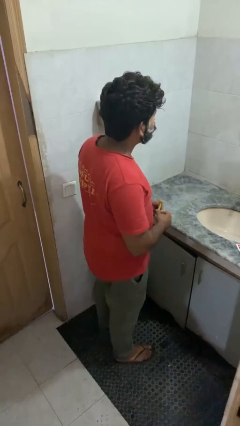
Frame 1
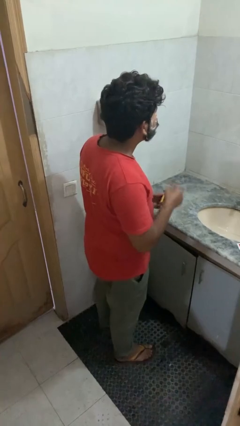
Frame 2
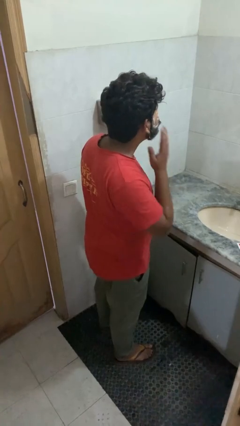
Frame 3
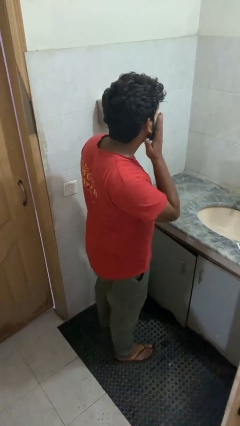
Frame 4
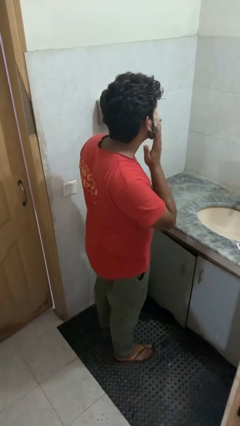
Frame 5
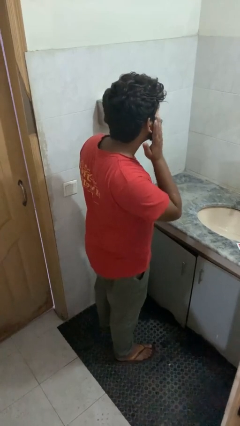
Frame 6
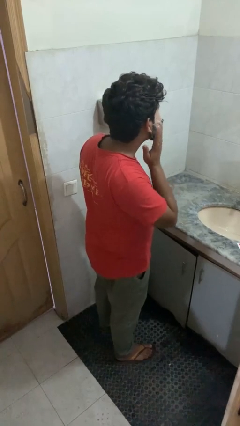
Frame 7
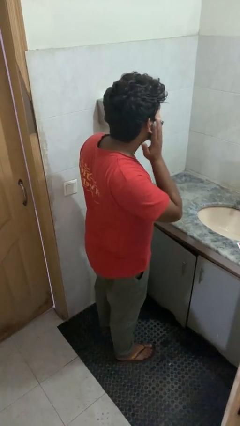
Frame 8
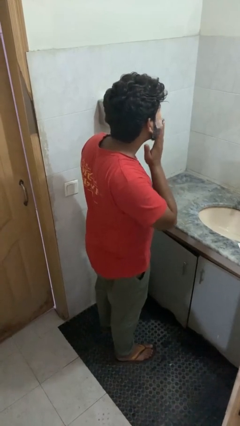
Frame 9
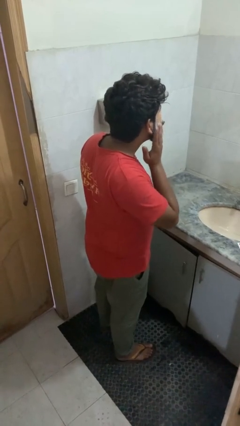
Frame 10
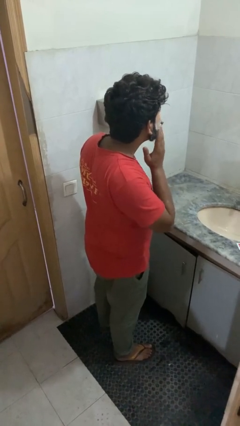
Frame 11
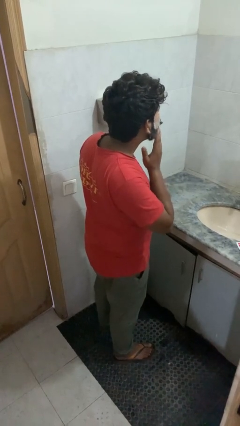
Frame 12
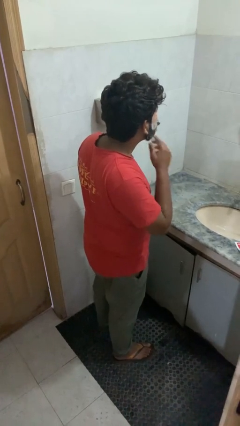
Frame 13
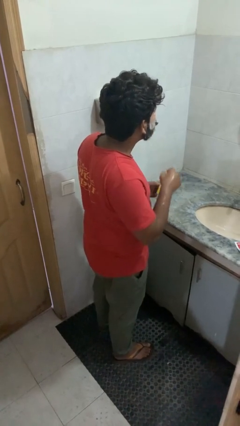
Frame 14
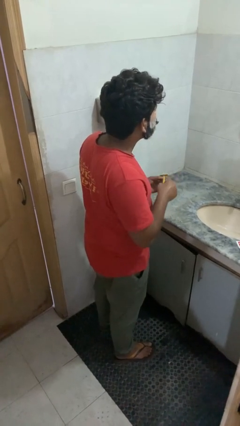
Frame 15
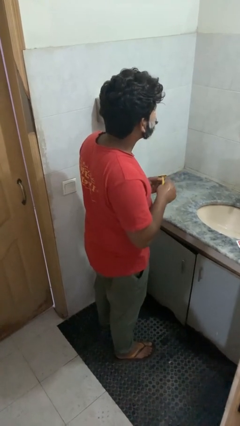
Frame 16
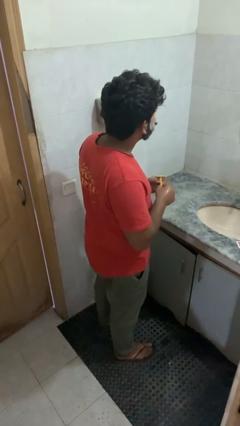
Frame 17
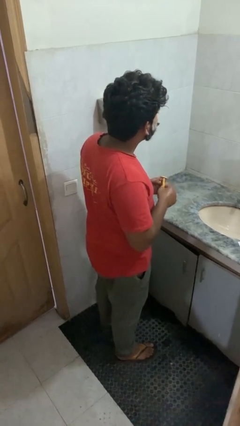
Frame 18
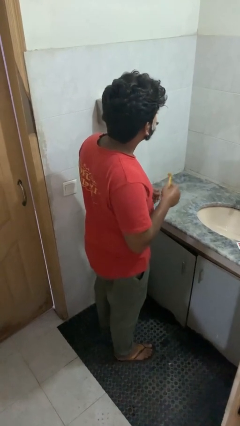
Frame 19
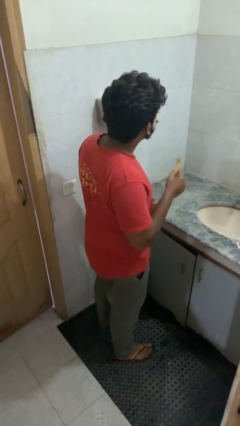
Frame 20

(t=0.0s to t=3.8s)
person applies shaving cream

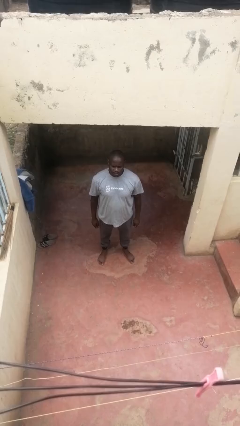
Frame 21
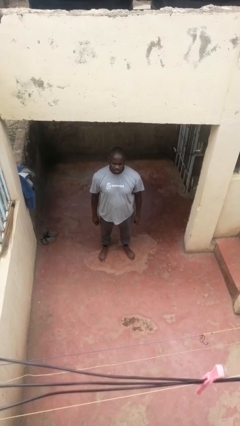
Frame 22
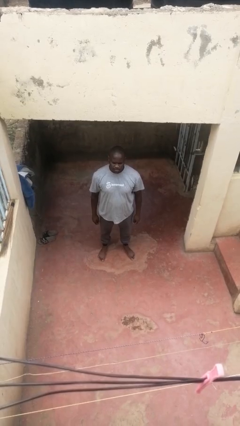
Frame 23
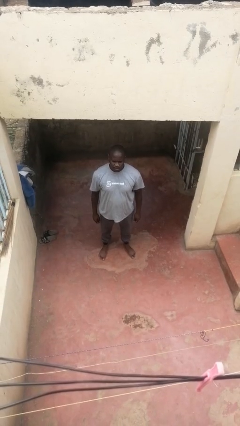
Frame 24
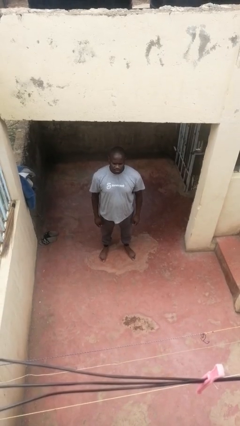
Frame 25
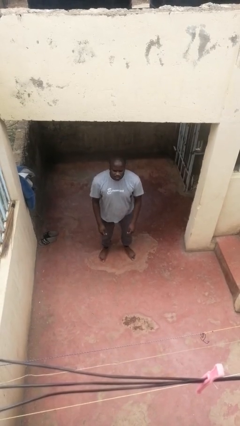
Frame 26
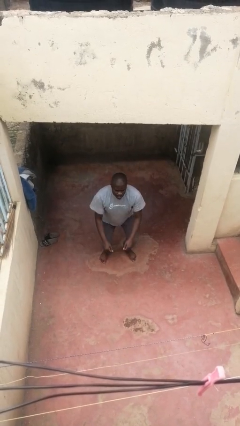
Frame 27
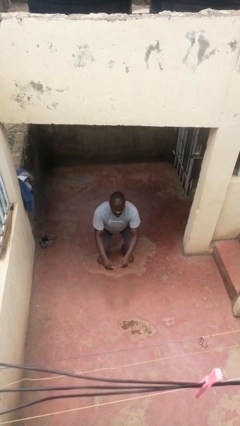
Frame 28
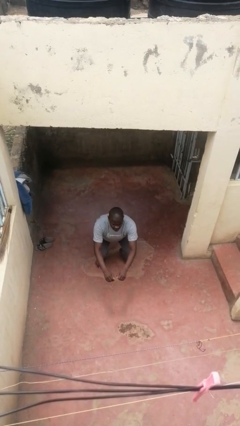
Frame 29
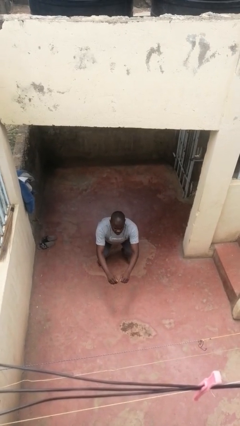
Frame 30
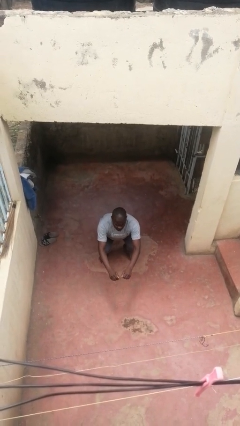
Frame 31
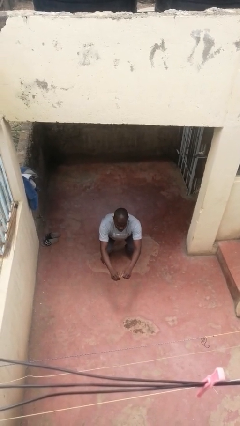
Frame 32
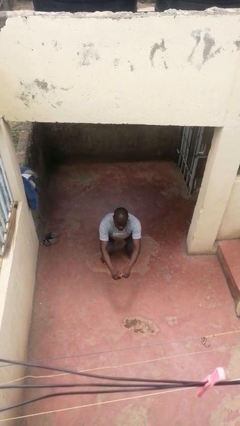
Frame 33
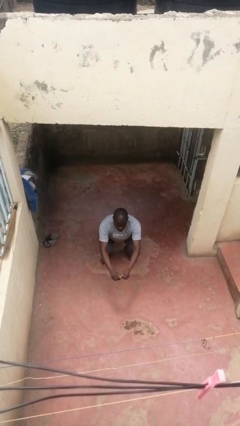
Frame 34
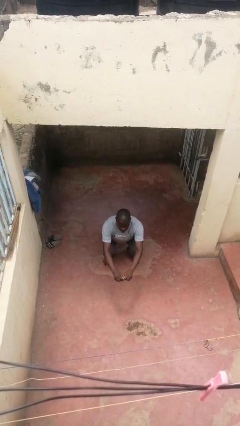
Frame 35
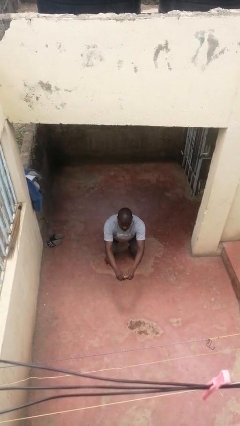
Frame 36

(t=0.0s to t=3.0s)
person squats

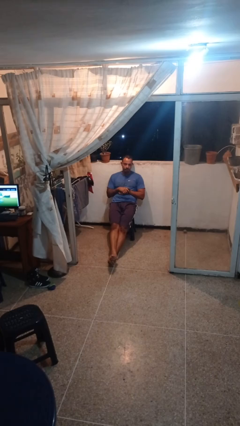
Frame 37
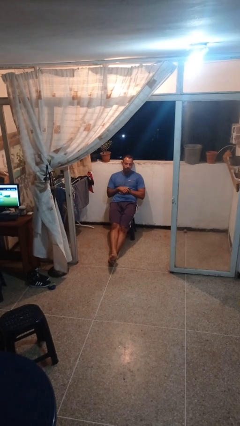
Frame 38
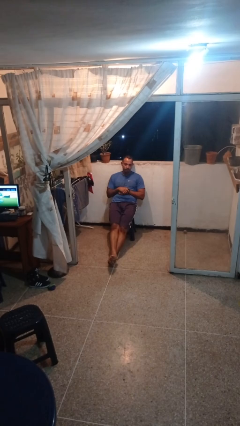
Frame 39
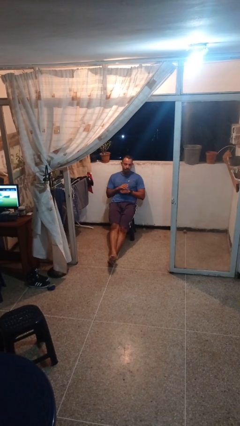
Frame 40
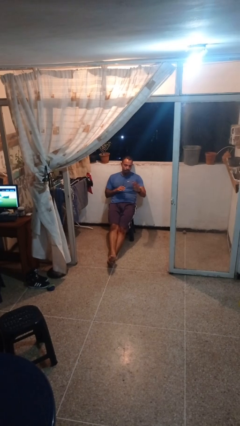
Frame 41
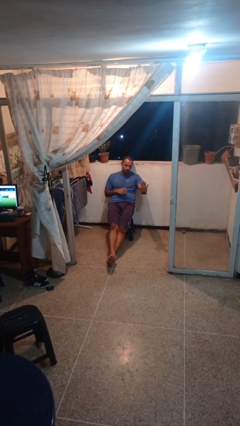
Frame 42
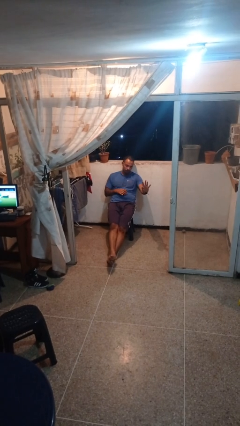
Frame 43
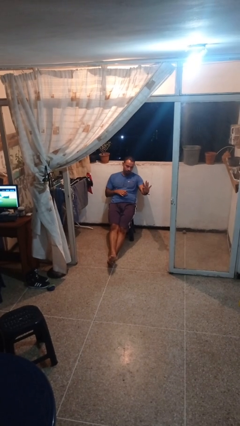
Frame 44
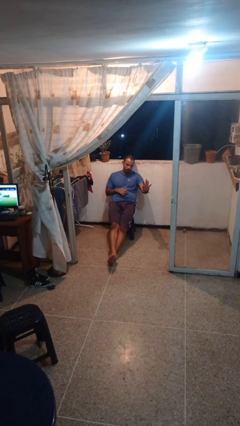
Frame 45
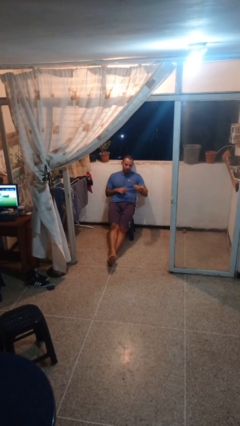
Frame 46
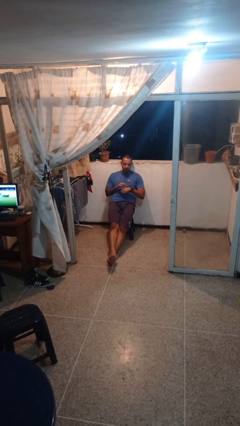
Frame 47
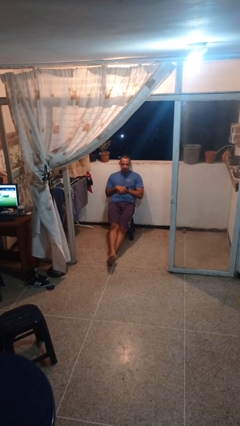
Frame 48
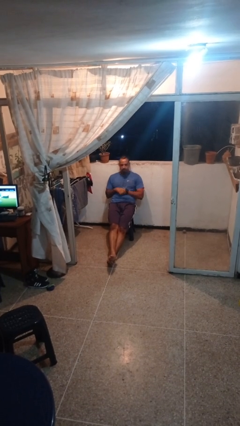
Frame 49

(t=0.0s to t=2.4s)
person gestures number four

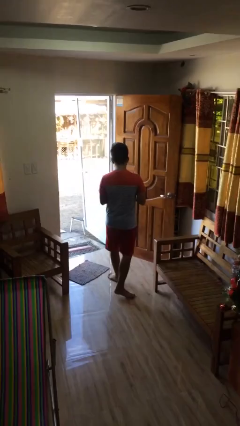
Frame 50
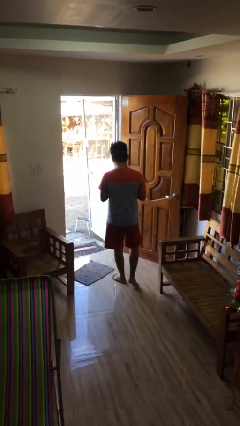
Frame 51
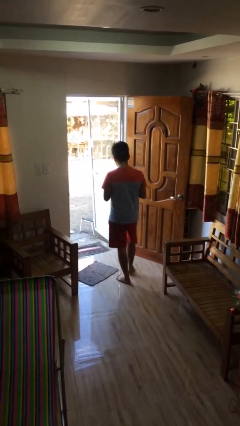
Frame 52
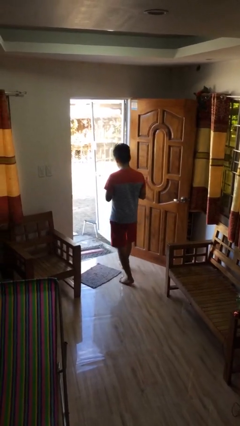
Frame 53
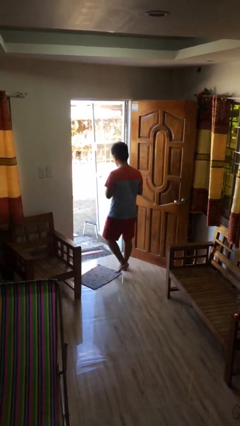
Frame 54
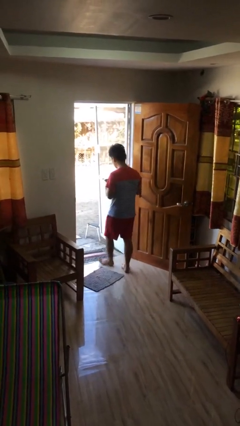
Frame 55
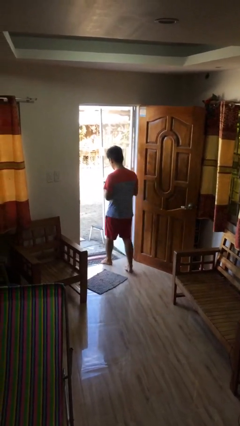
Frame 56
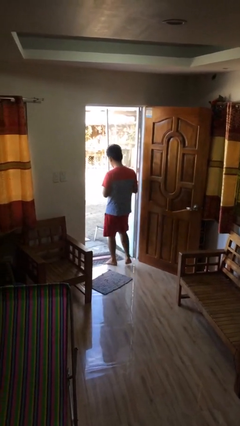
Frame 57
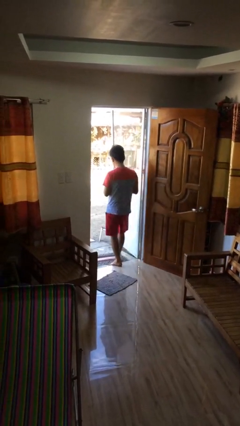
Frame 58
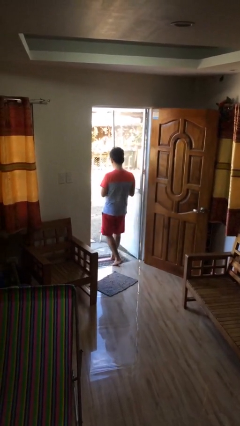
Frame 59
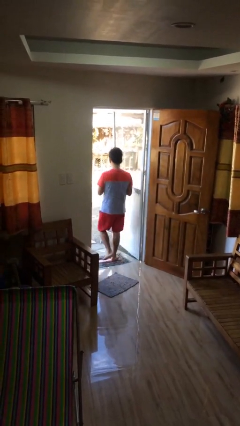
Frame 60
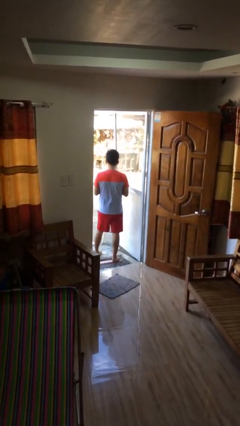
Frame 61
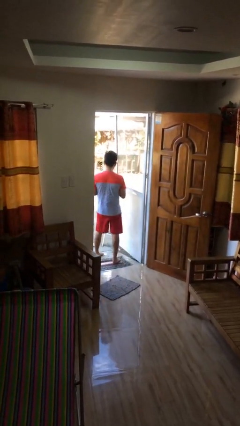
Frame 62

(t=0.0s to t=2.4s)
person exits scene through structure

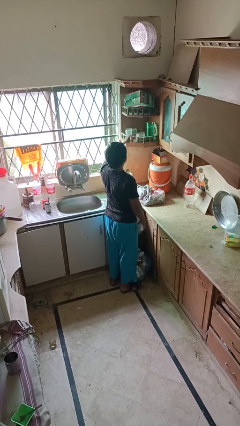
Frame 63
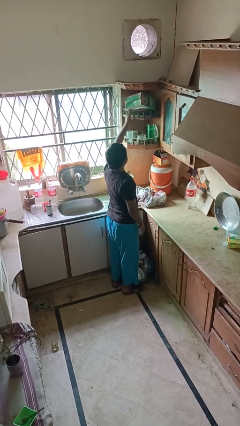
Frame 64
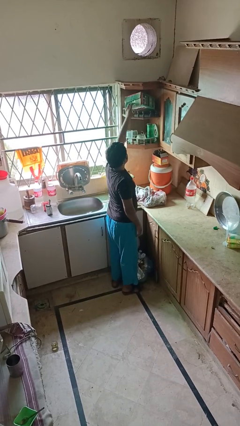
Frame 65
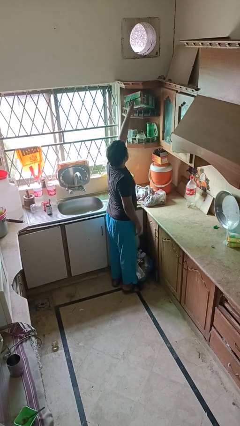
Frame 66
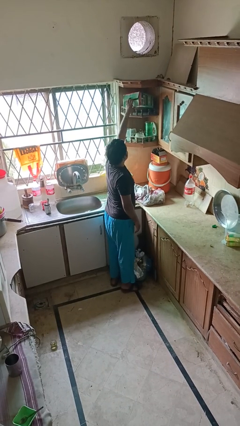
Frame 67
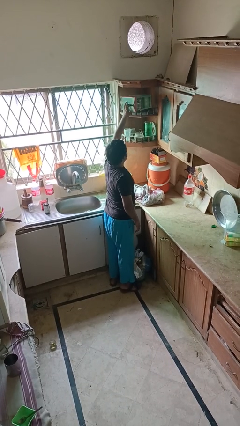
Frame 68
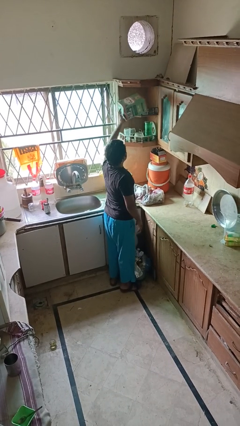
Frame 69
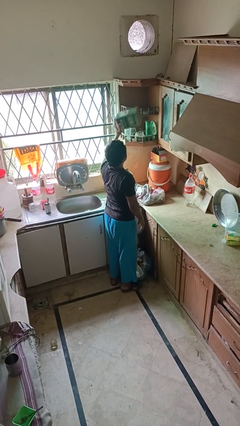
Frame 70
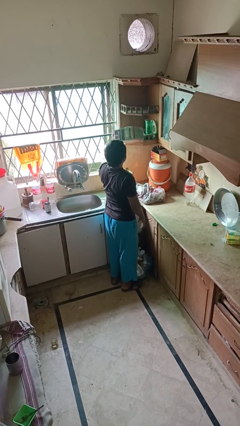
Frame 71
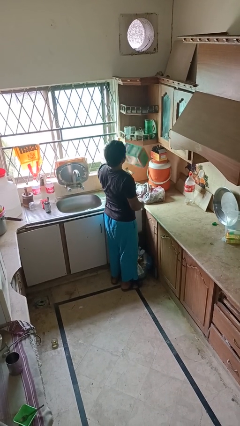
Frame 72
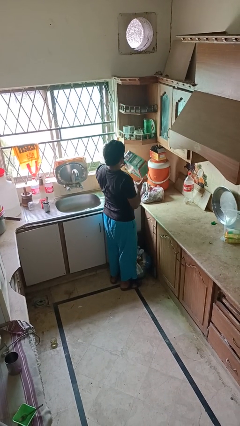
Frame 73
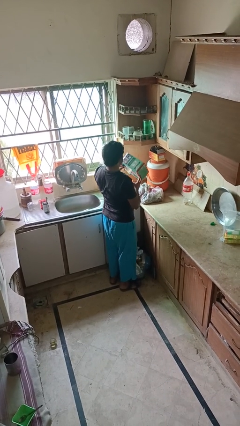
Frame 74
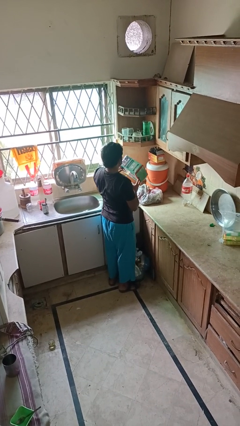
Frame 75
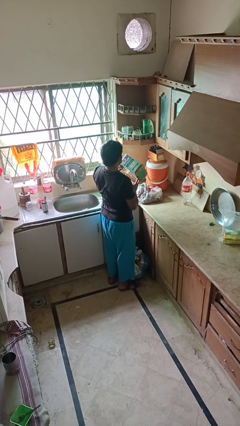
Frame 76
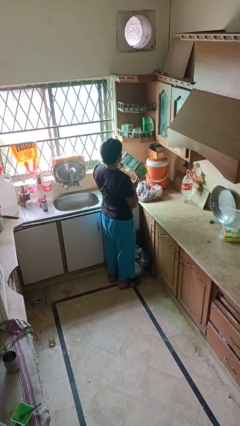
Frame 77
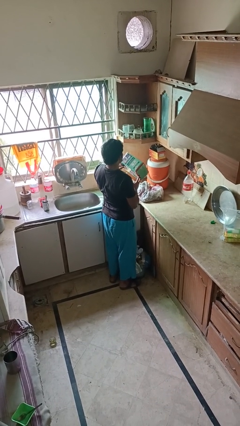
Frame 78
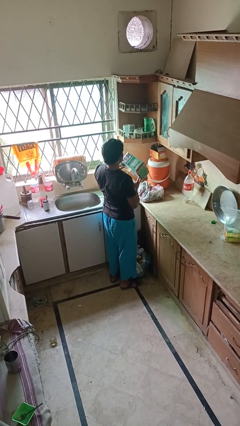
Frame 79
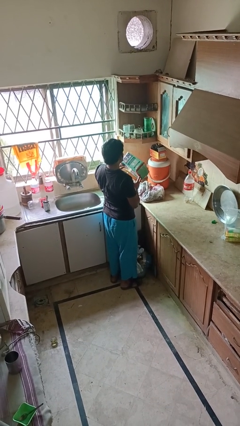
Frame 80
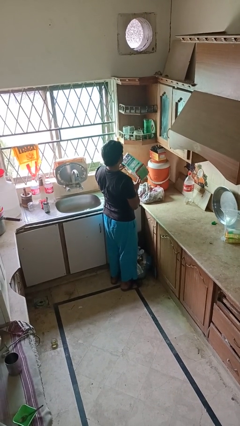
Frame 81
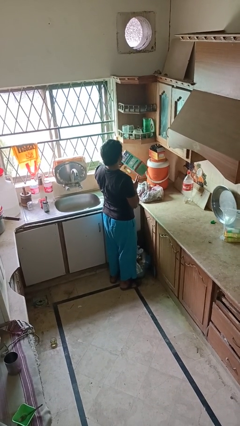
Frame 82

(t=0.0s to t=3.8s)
person picks up object from shelf

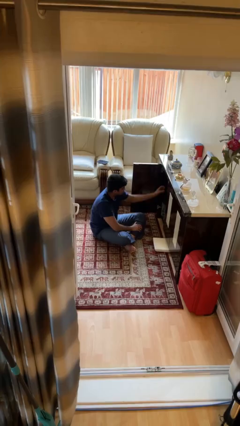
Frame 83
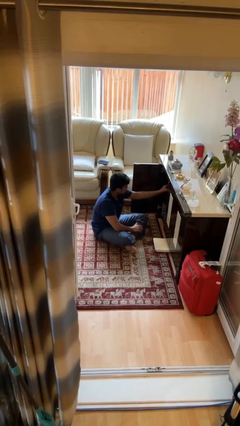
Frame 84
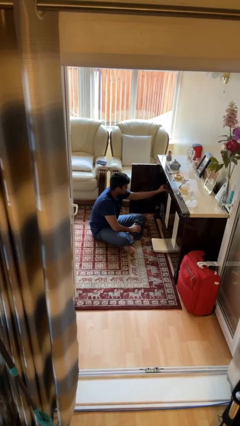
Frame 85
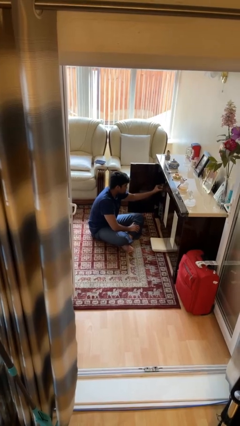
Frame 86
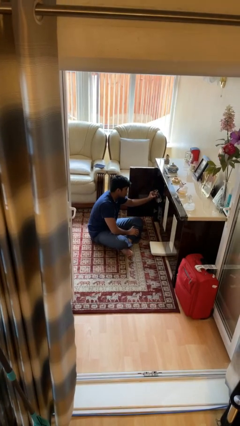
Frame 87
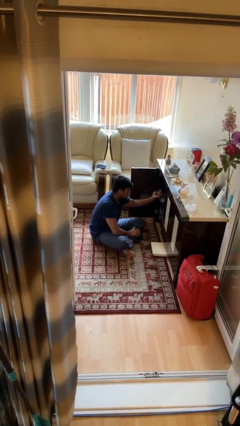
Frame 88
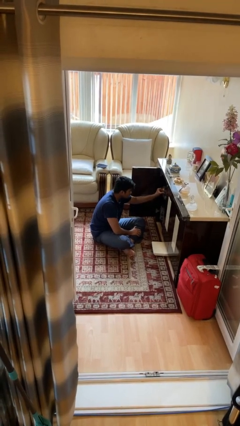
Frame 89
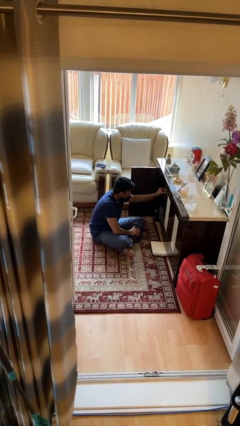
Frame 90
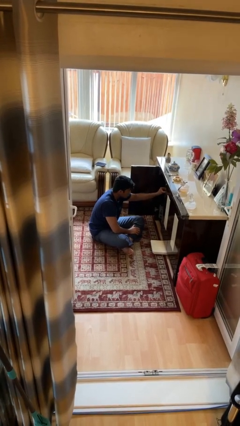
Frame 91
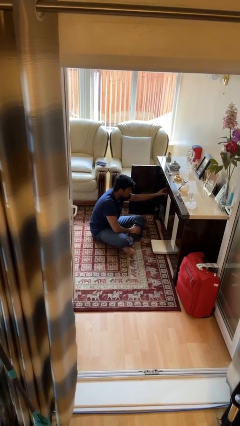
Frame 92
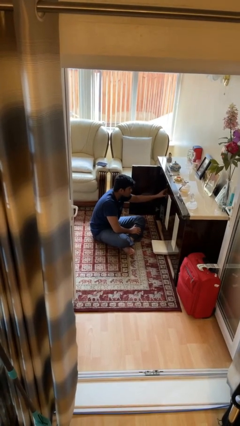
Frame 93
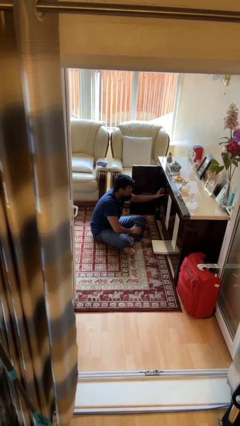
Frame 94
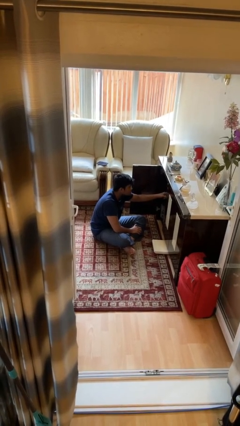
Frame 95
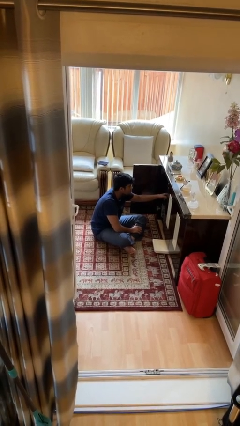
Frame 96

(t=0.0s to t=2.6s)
person searches in cabinet
